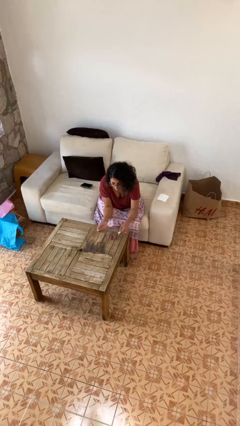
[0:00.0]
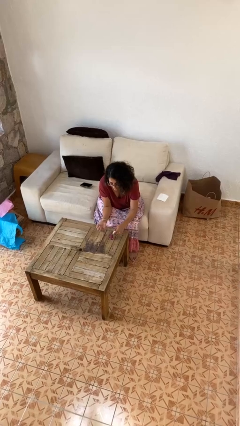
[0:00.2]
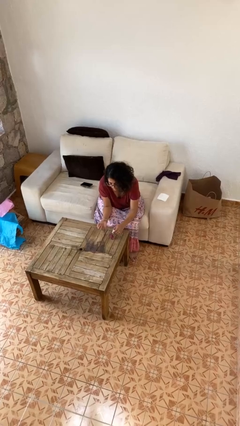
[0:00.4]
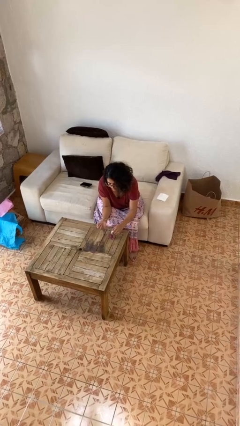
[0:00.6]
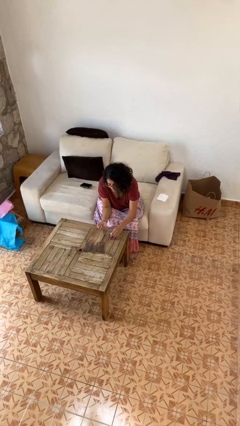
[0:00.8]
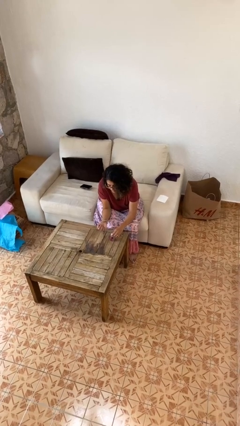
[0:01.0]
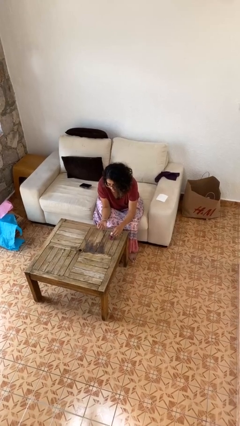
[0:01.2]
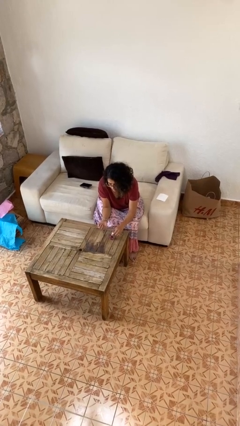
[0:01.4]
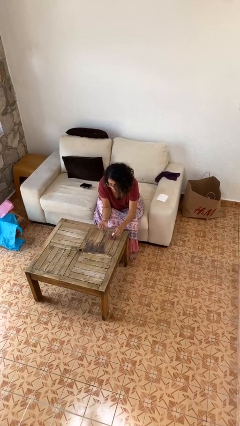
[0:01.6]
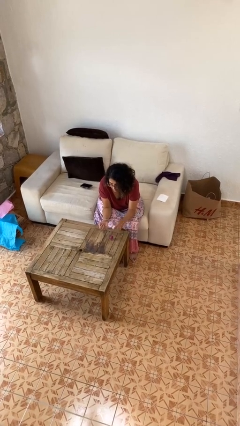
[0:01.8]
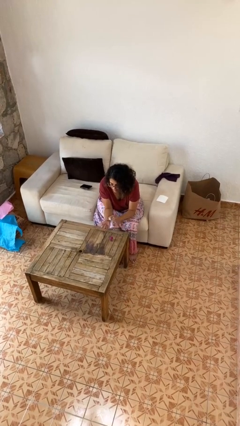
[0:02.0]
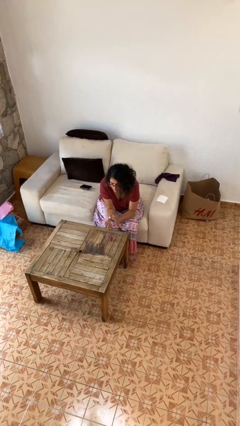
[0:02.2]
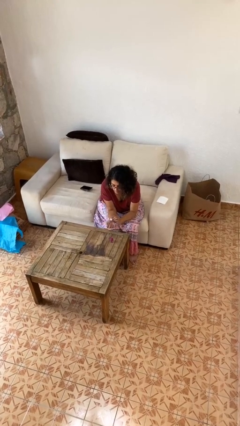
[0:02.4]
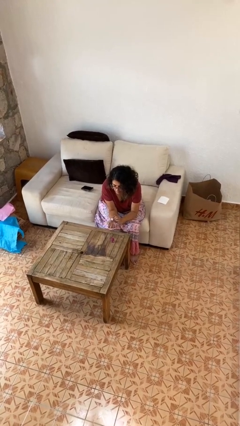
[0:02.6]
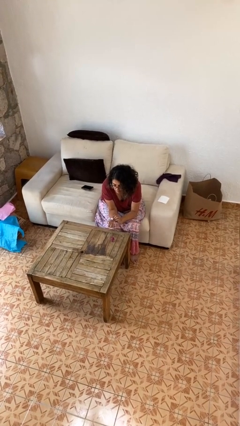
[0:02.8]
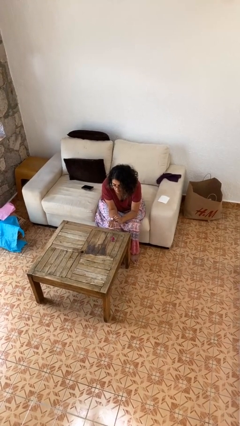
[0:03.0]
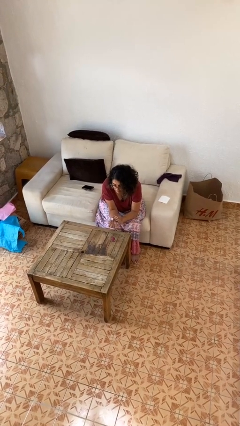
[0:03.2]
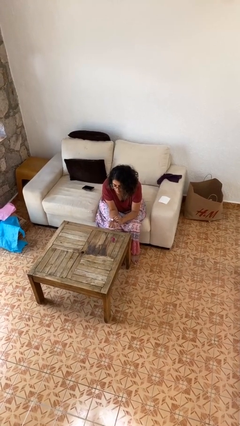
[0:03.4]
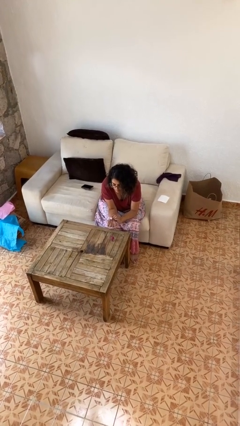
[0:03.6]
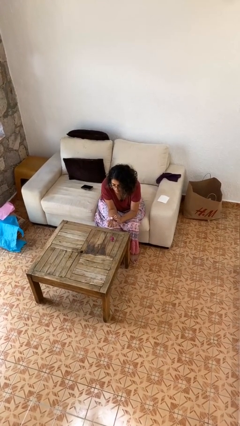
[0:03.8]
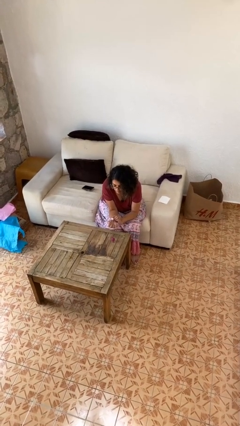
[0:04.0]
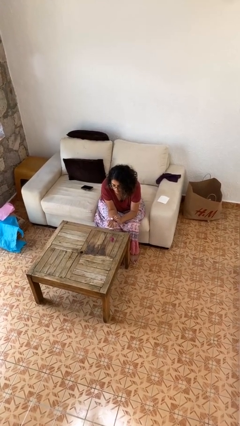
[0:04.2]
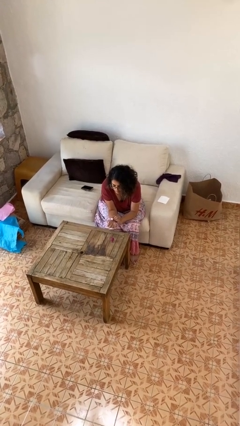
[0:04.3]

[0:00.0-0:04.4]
person paints fingernails

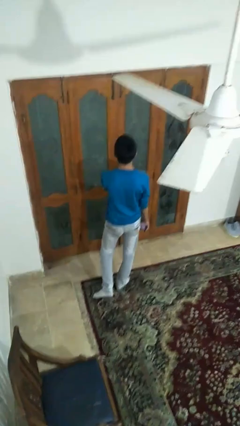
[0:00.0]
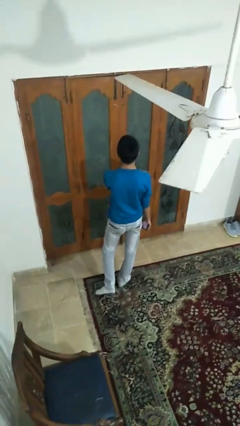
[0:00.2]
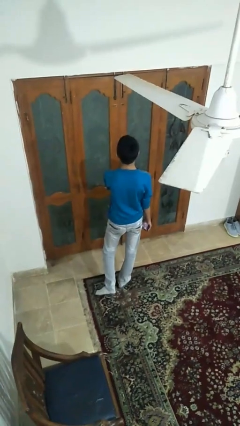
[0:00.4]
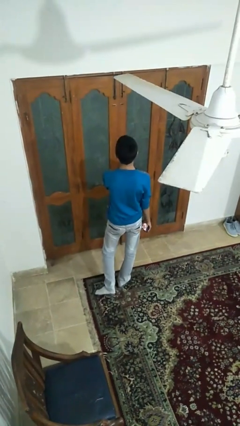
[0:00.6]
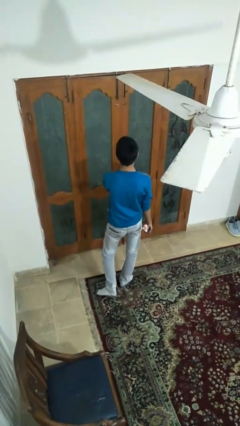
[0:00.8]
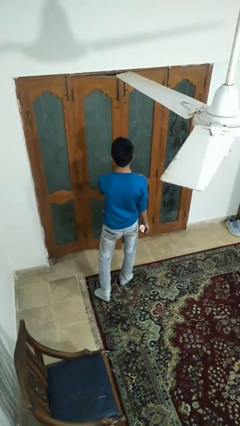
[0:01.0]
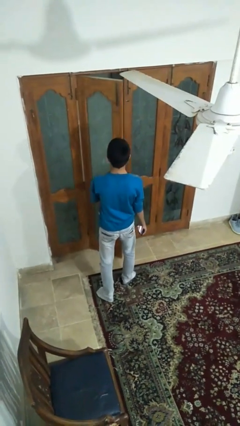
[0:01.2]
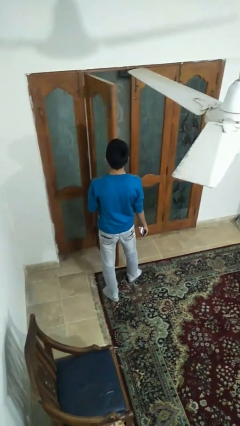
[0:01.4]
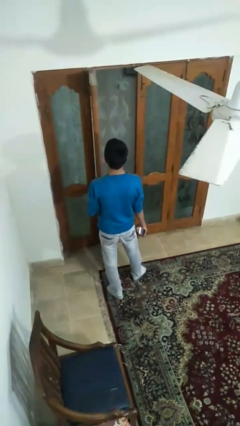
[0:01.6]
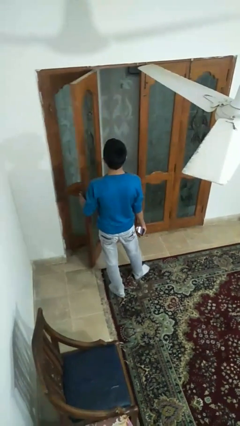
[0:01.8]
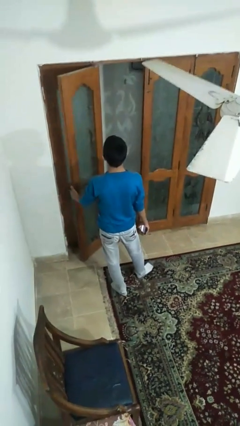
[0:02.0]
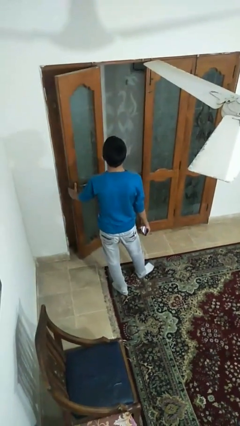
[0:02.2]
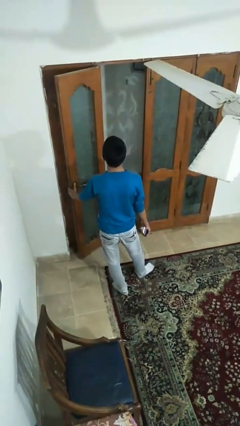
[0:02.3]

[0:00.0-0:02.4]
person opens facility door

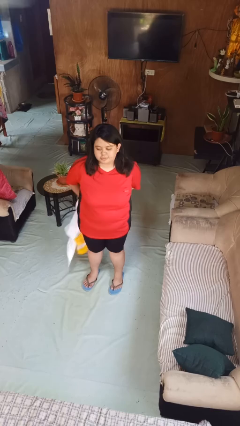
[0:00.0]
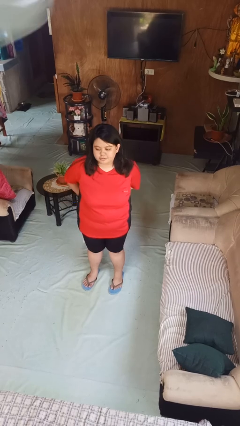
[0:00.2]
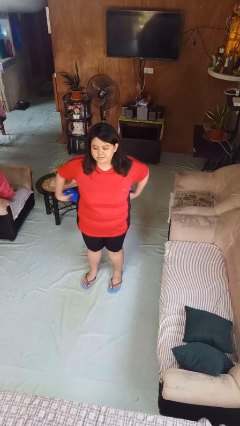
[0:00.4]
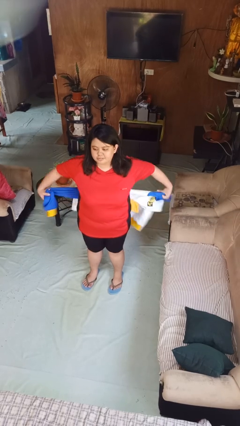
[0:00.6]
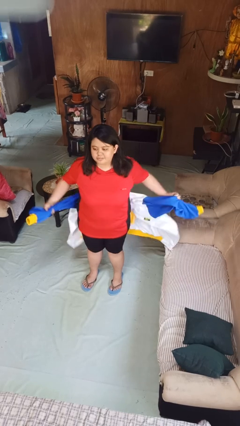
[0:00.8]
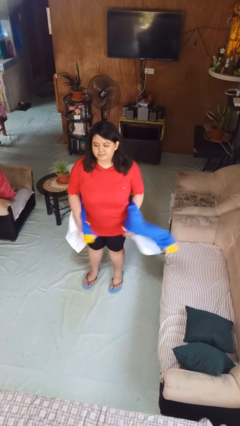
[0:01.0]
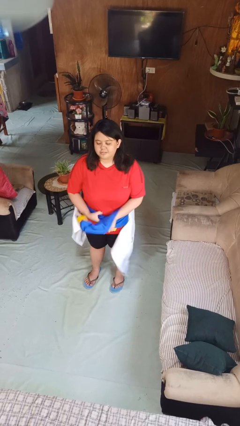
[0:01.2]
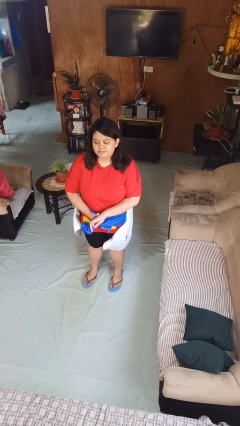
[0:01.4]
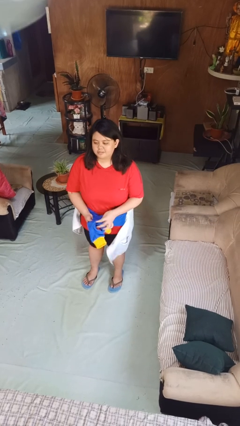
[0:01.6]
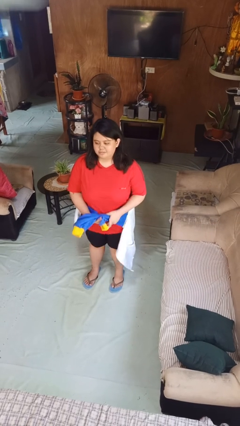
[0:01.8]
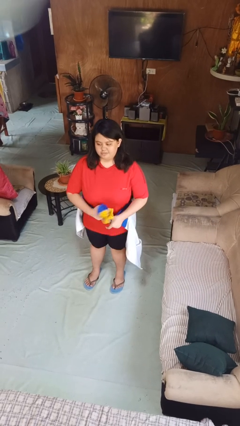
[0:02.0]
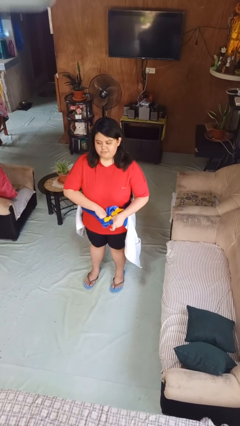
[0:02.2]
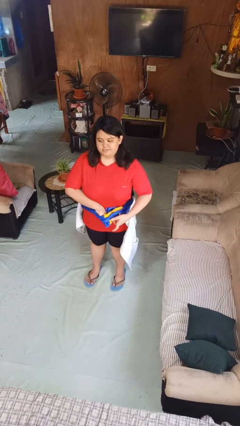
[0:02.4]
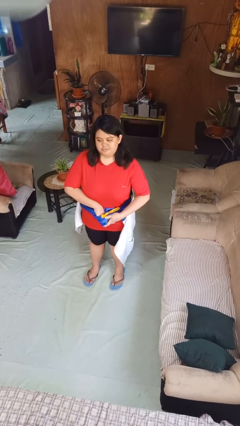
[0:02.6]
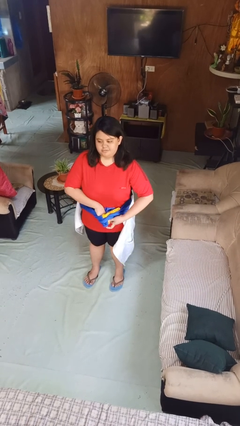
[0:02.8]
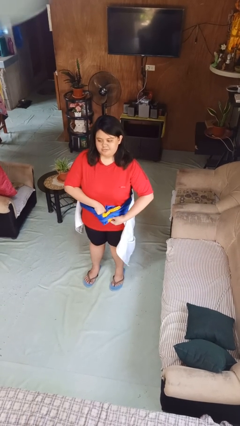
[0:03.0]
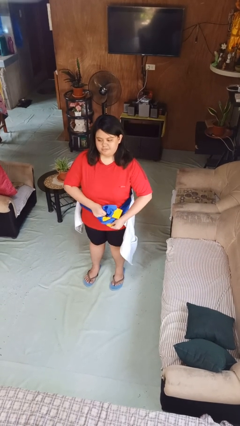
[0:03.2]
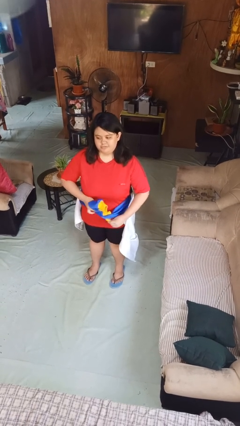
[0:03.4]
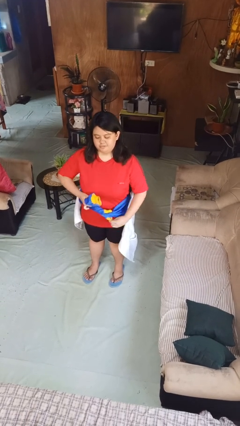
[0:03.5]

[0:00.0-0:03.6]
person ties jacket around waist

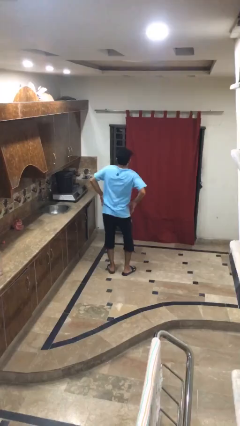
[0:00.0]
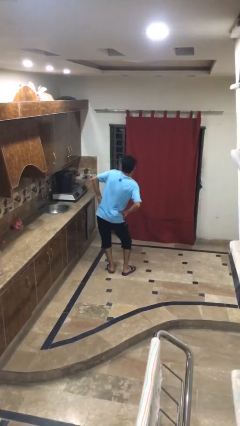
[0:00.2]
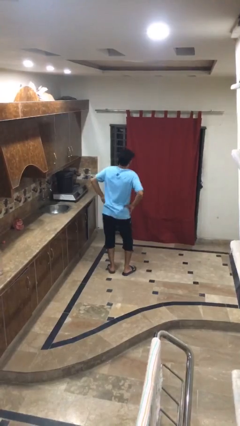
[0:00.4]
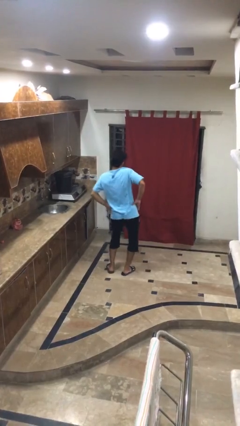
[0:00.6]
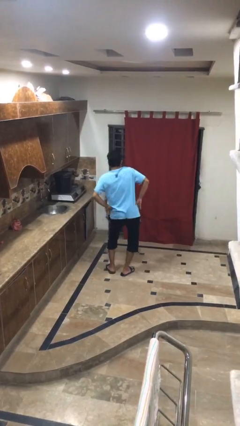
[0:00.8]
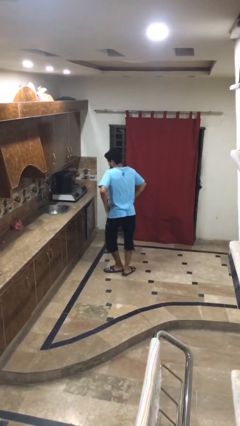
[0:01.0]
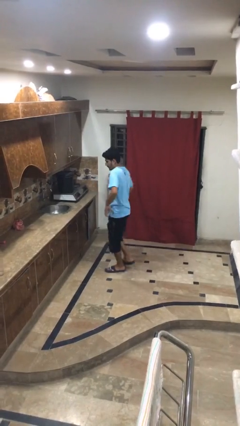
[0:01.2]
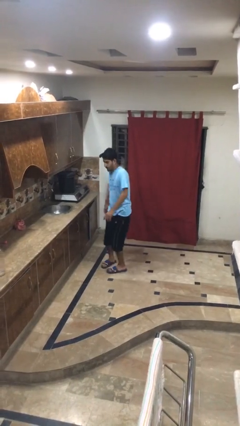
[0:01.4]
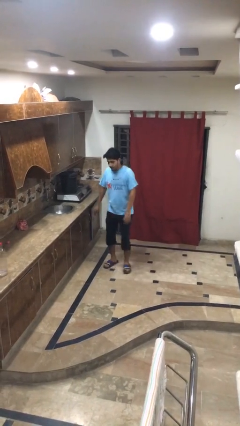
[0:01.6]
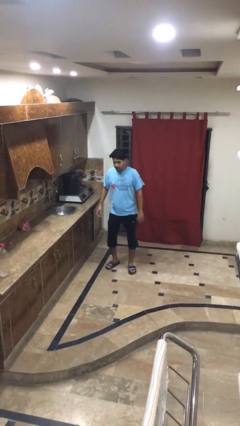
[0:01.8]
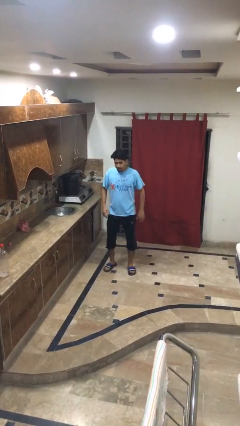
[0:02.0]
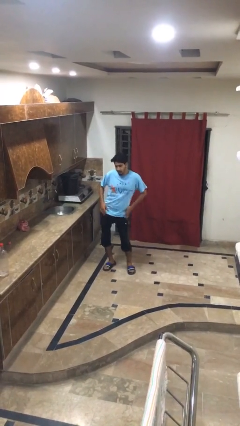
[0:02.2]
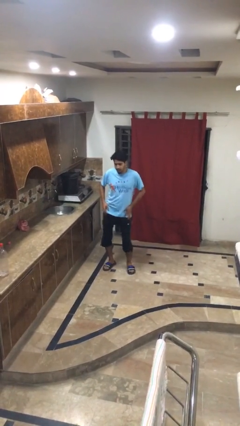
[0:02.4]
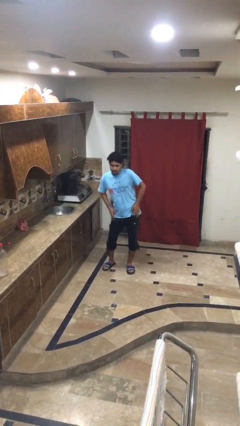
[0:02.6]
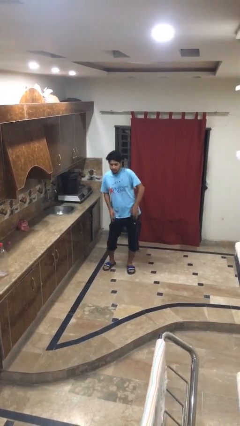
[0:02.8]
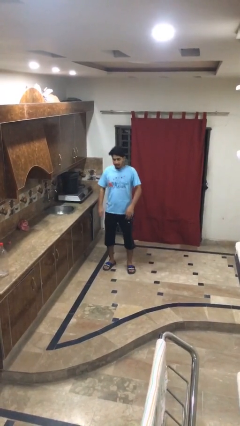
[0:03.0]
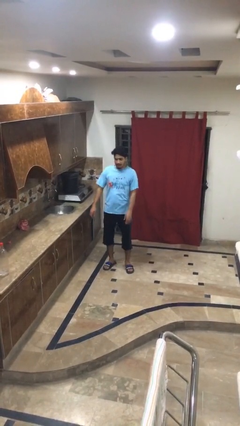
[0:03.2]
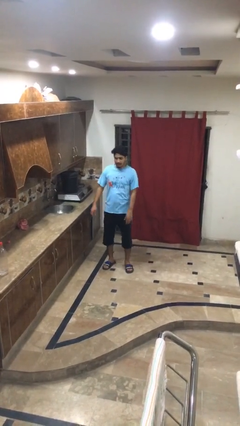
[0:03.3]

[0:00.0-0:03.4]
person wiggles hips

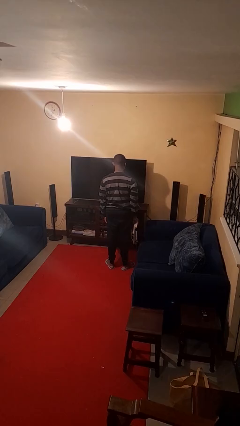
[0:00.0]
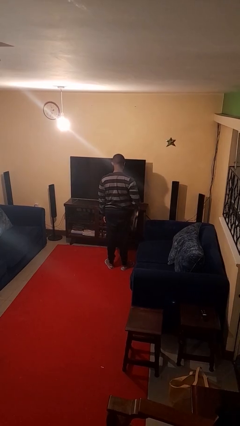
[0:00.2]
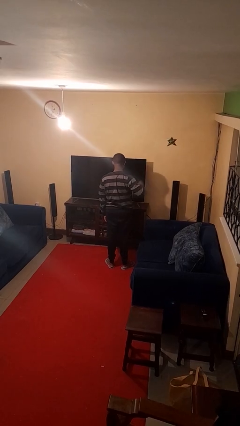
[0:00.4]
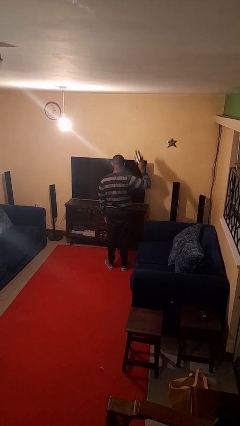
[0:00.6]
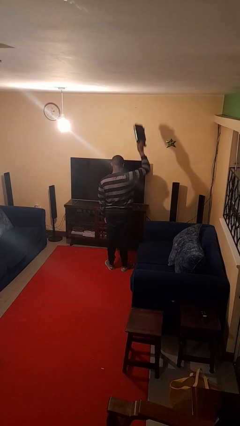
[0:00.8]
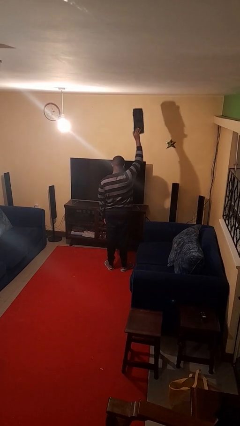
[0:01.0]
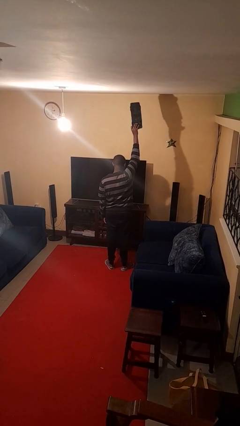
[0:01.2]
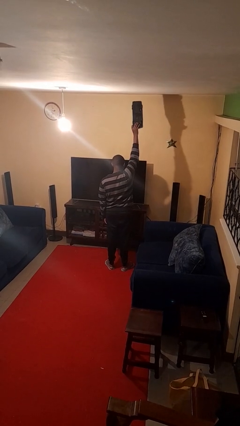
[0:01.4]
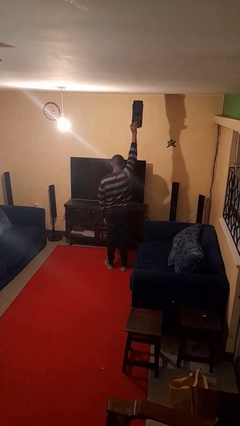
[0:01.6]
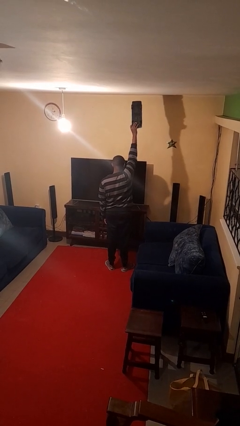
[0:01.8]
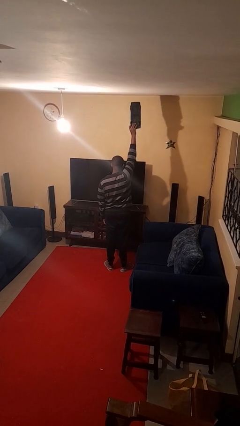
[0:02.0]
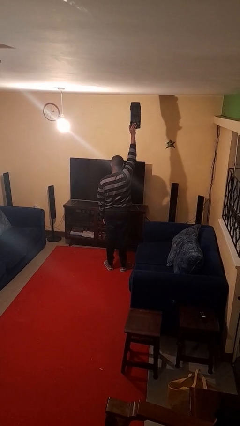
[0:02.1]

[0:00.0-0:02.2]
person holds object above head

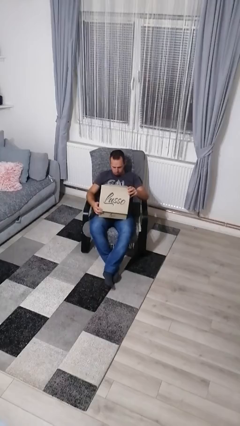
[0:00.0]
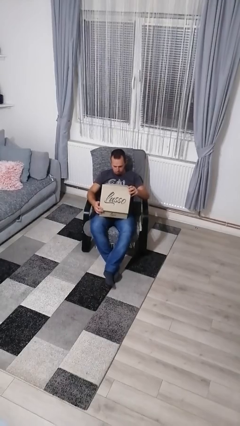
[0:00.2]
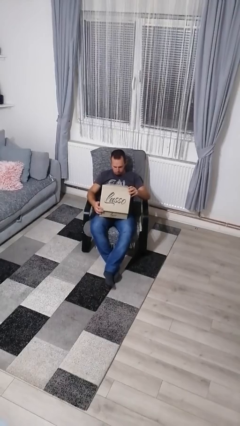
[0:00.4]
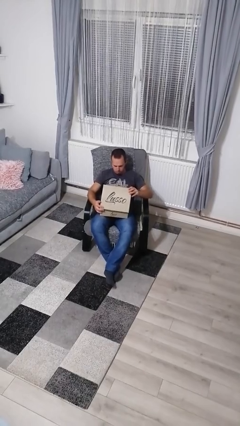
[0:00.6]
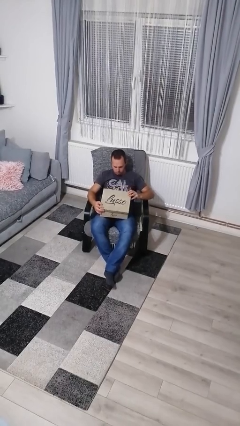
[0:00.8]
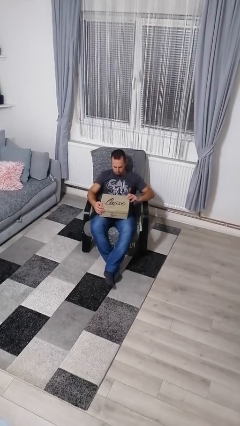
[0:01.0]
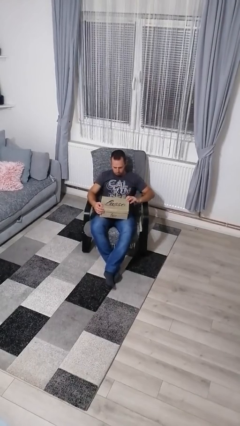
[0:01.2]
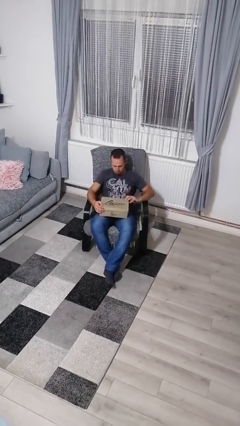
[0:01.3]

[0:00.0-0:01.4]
person closes box
